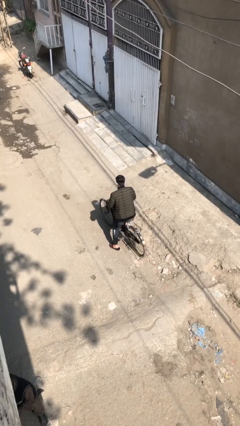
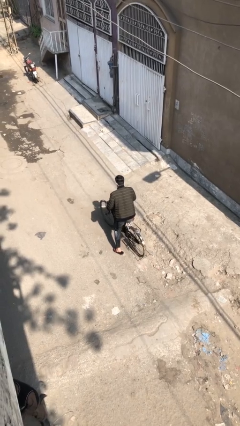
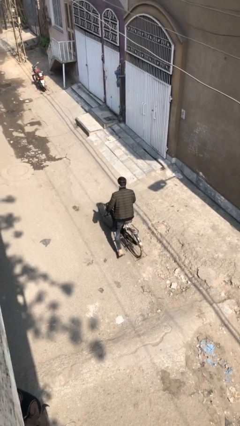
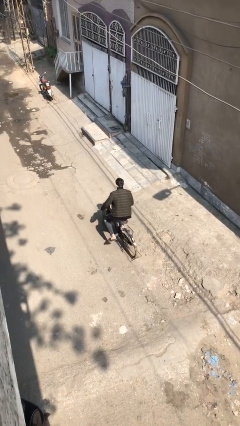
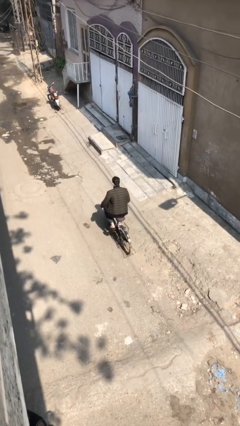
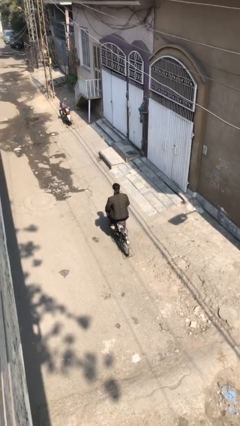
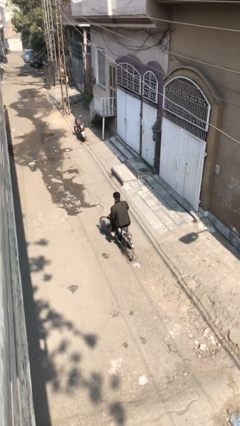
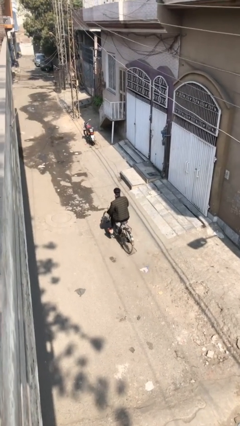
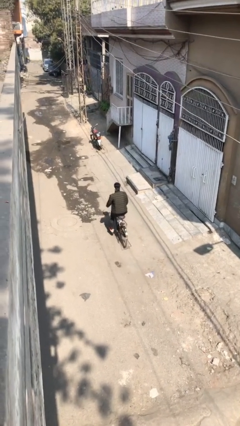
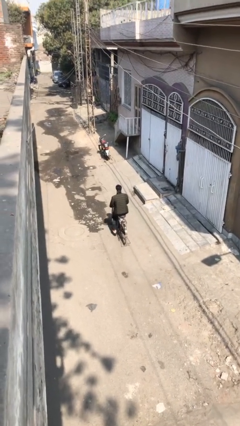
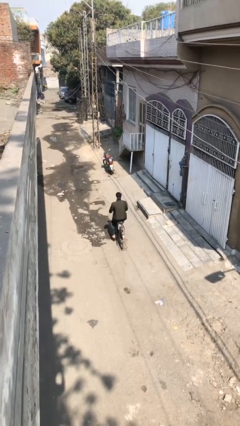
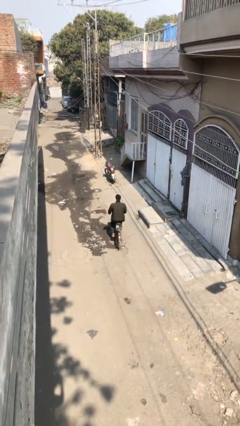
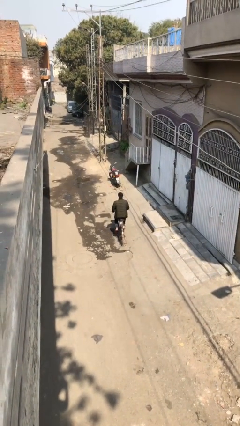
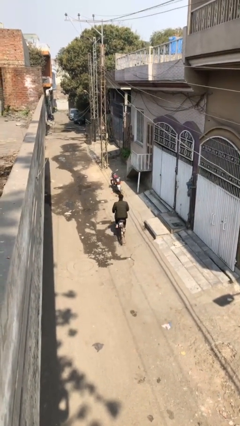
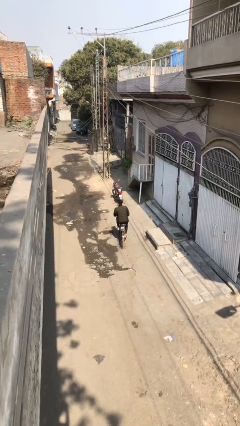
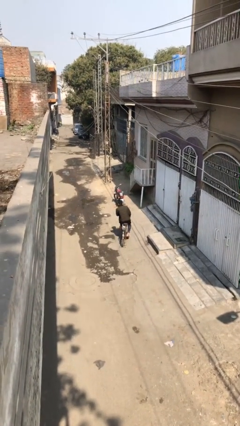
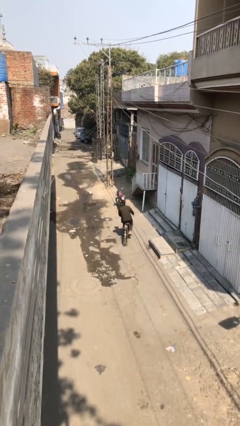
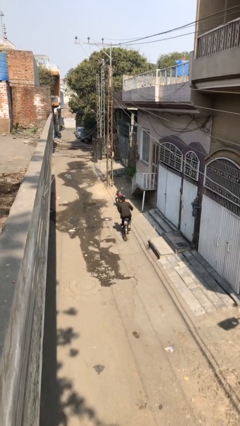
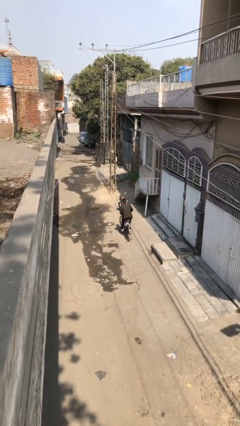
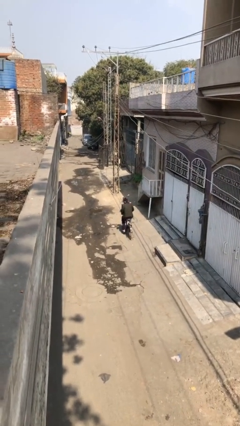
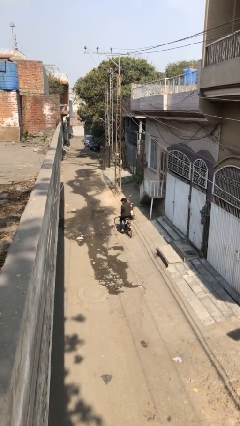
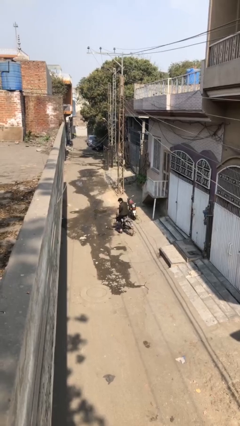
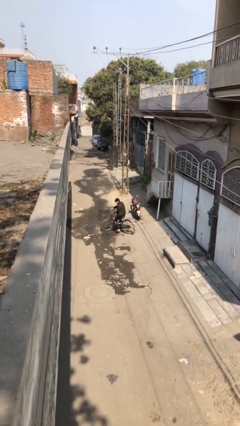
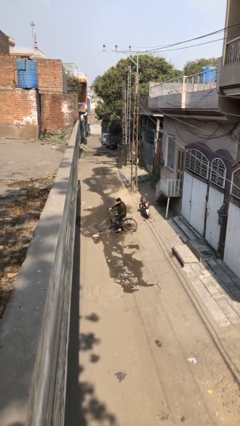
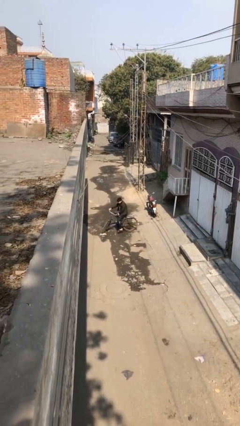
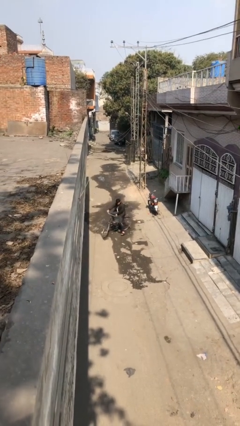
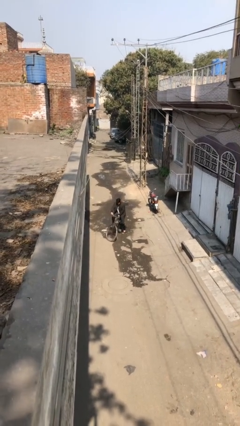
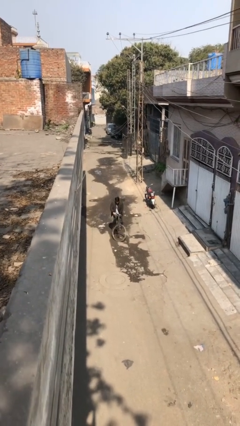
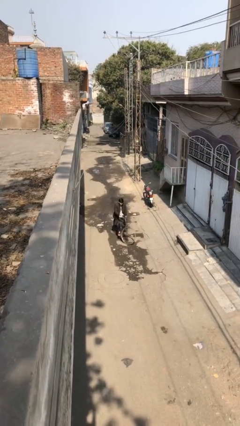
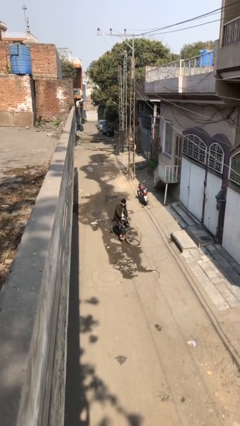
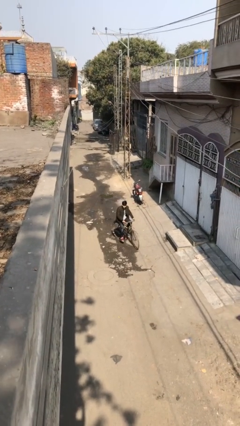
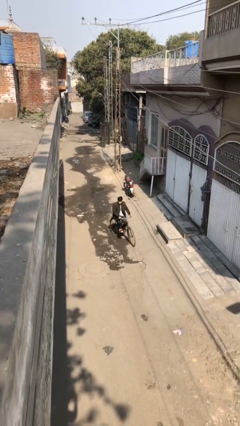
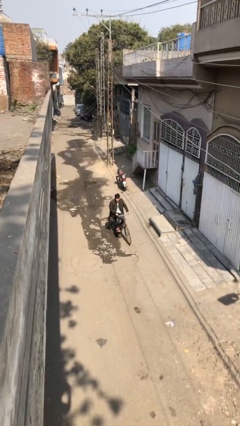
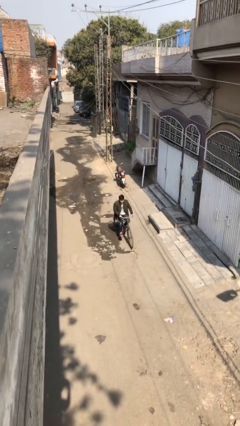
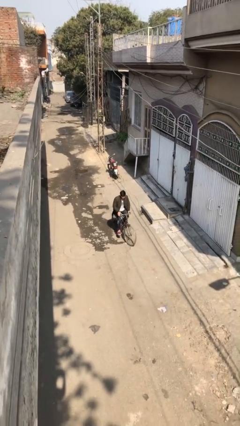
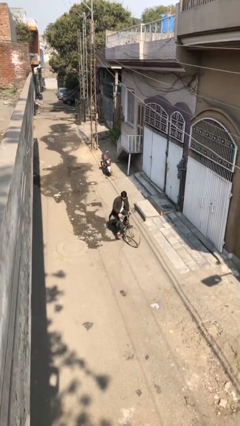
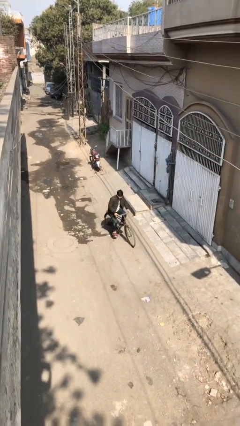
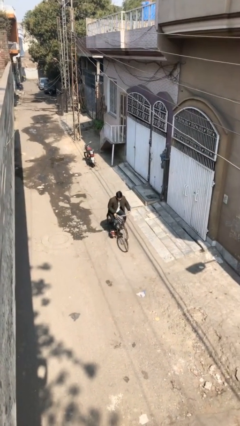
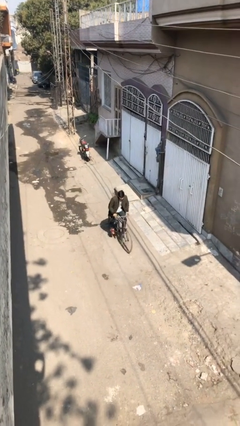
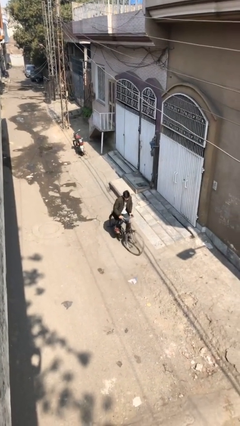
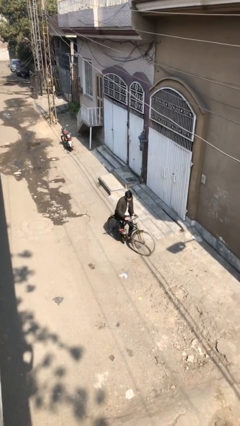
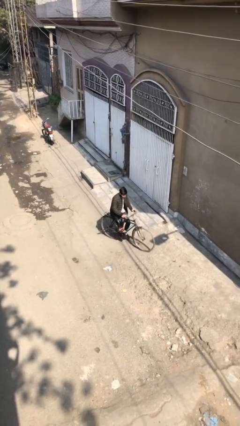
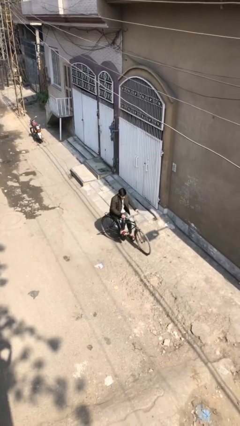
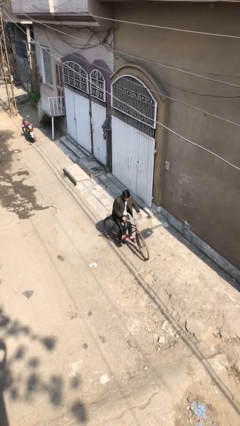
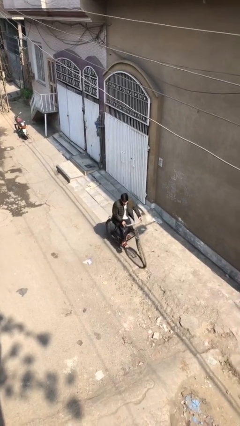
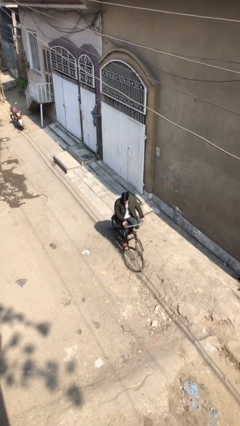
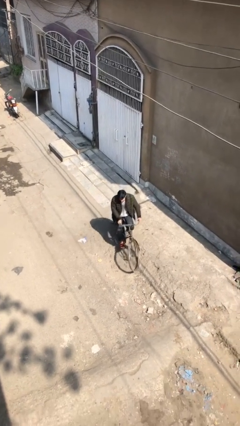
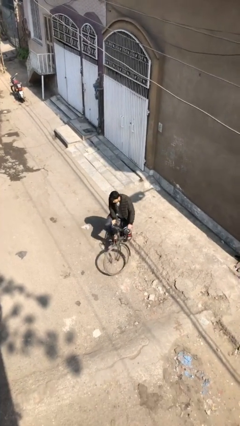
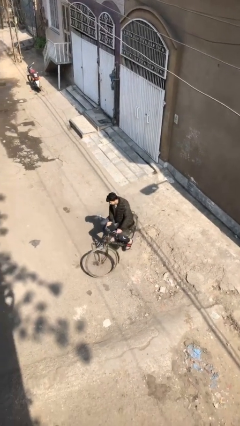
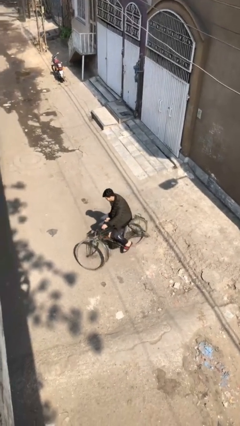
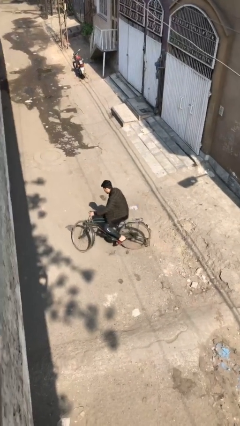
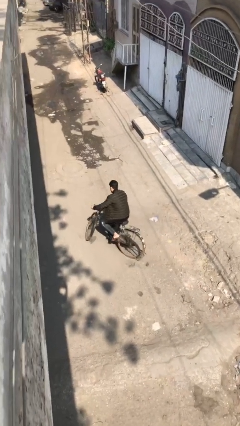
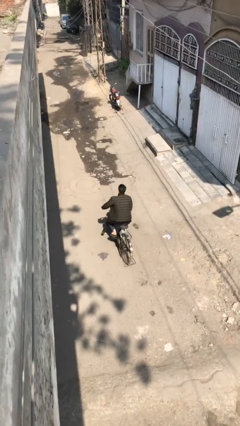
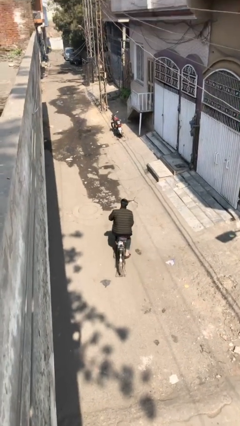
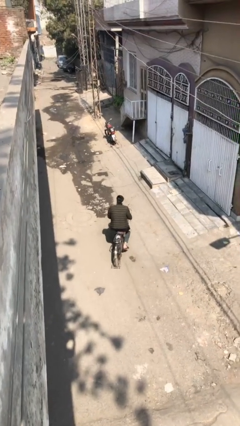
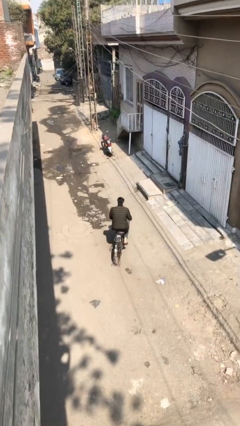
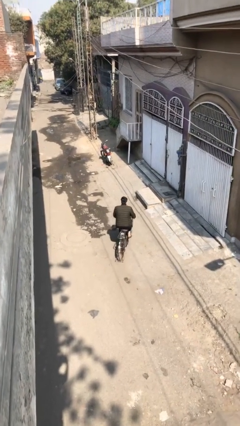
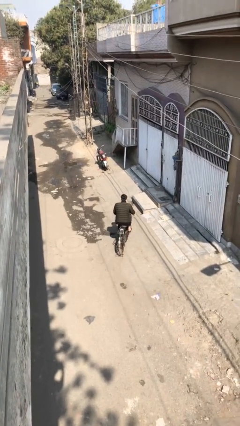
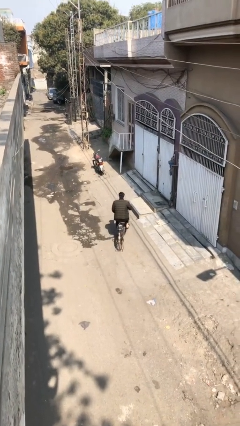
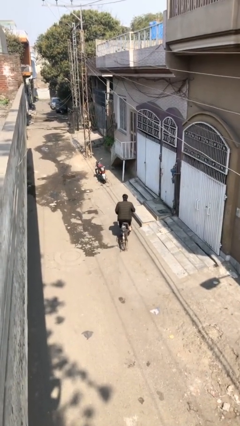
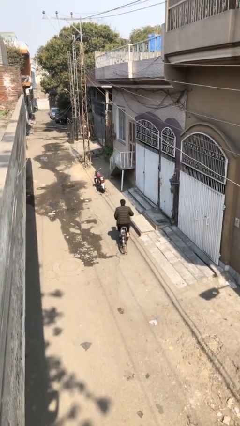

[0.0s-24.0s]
person rides bicycle

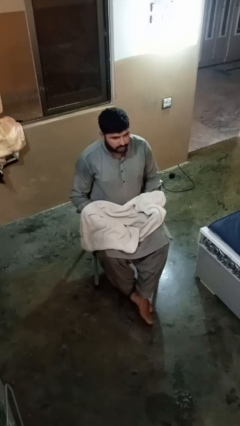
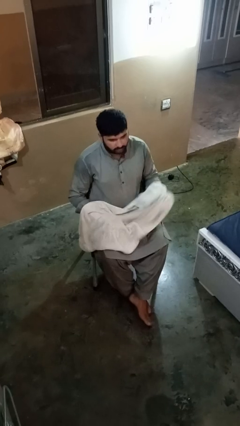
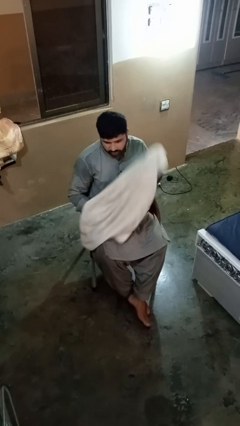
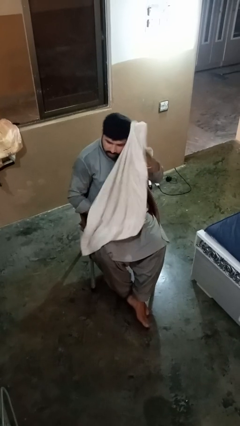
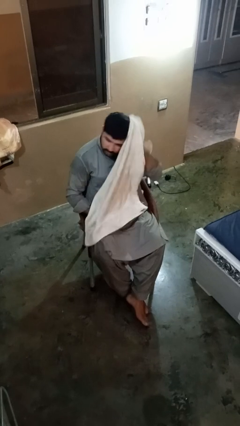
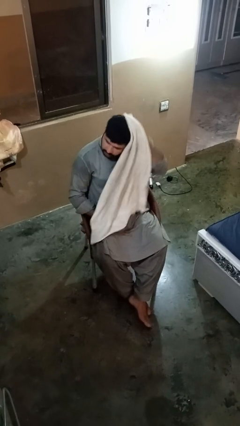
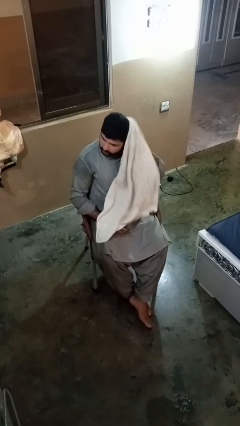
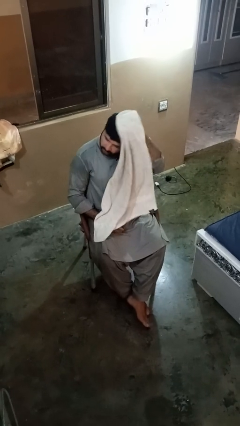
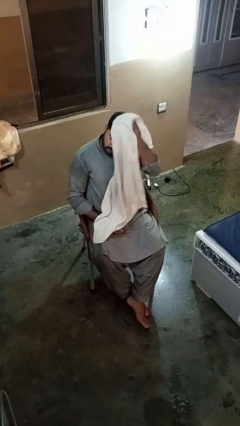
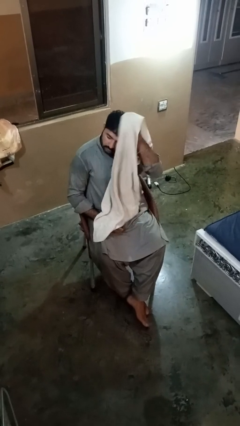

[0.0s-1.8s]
person dries hair with towel

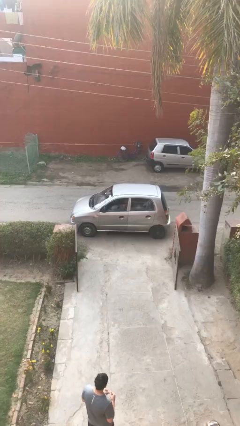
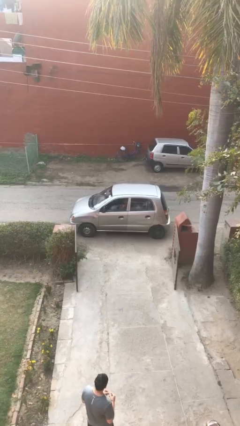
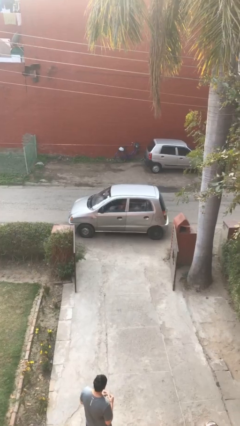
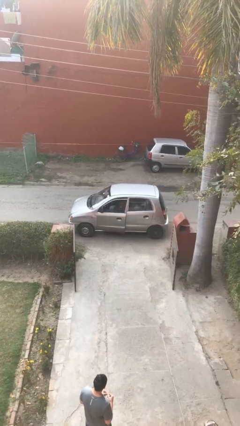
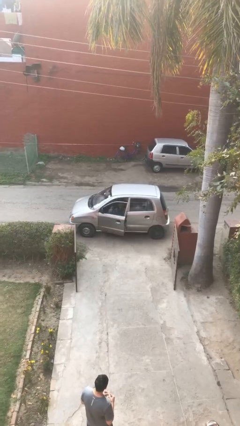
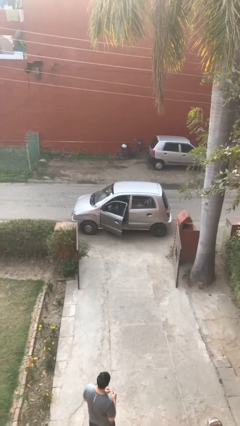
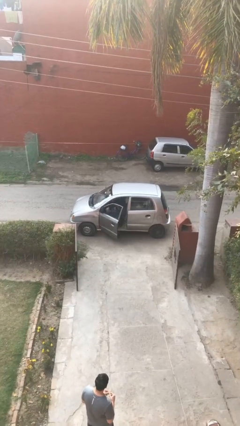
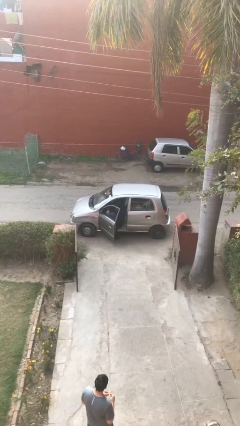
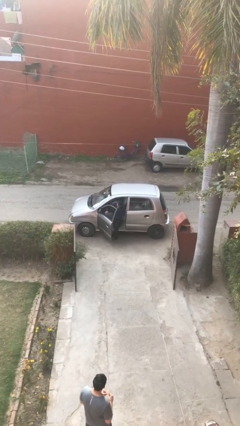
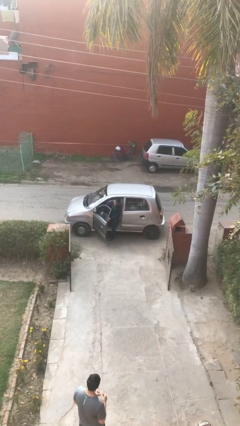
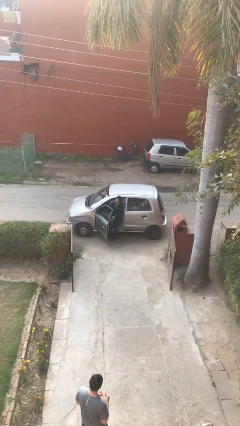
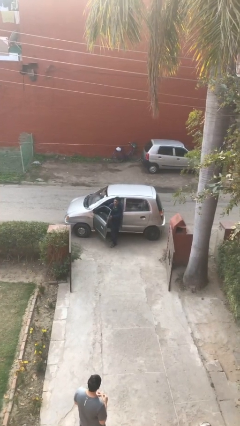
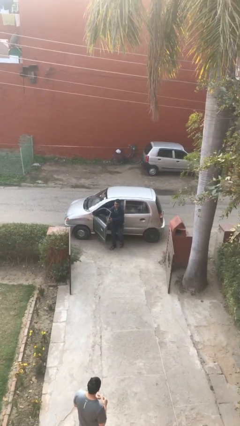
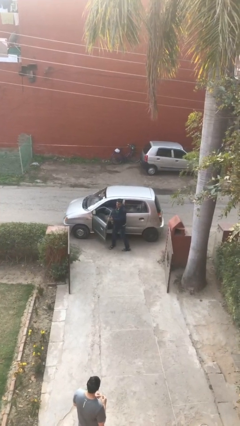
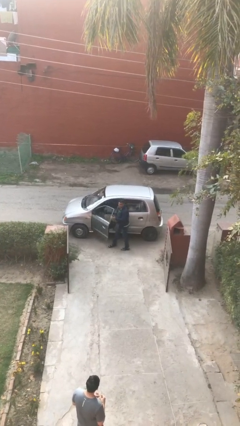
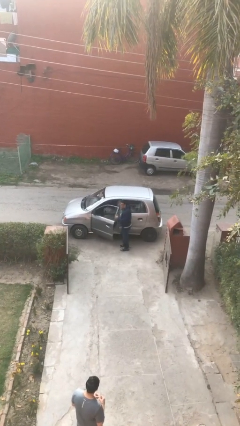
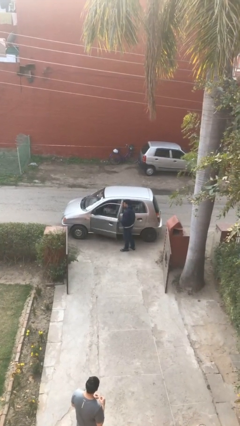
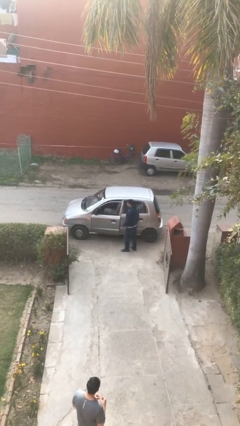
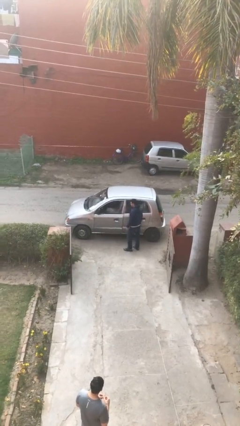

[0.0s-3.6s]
car drops off person

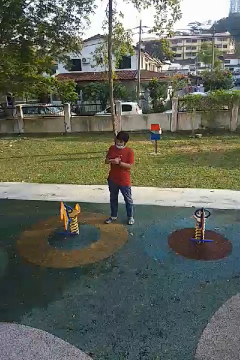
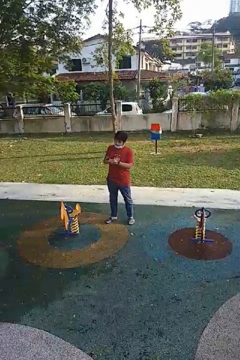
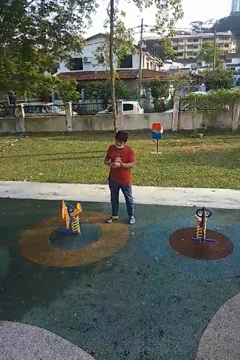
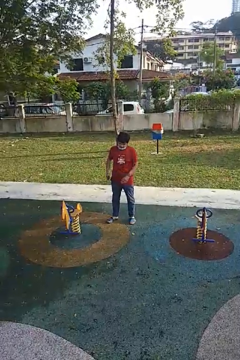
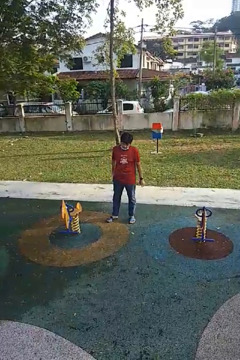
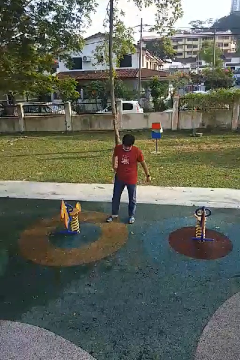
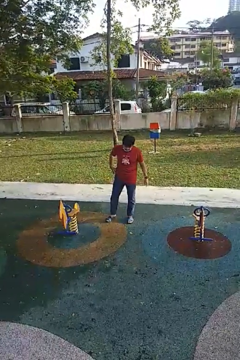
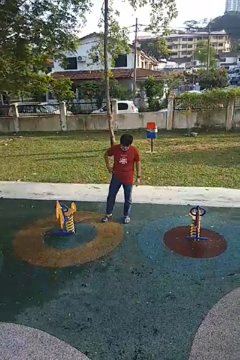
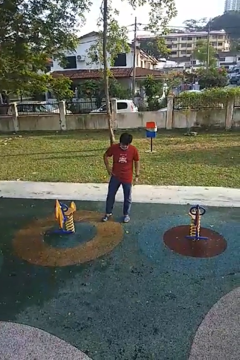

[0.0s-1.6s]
person puts phone into pocket
